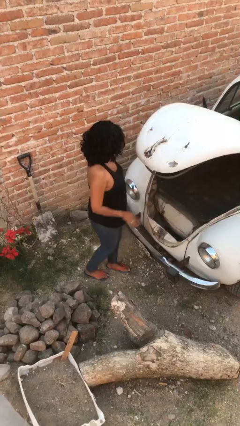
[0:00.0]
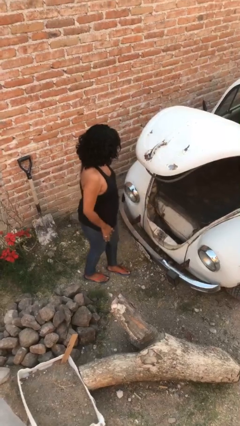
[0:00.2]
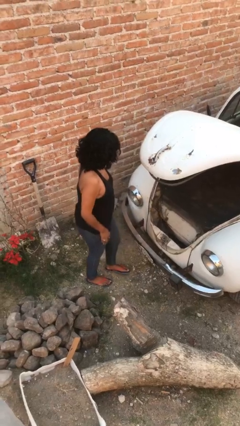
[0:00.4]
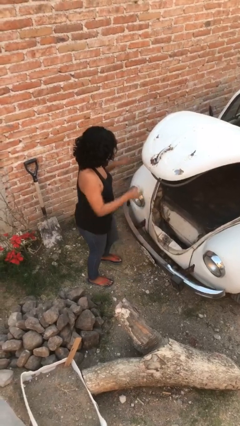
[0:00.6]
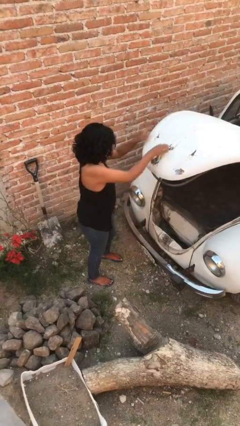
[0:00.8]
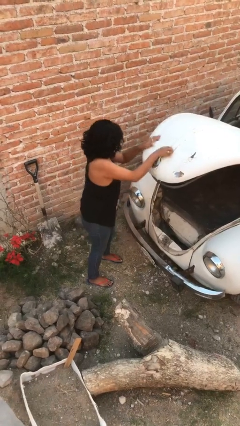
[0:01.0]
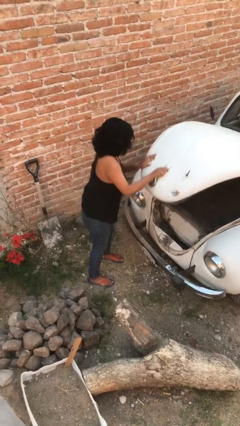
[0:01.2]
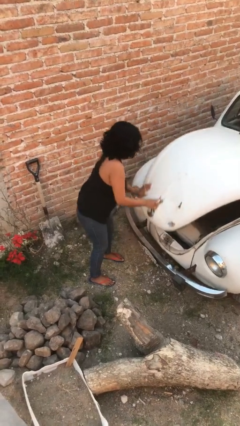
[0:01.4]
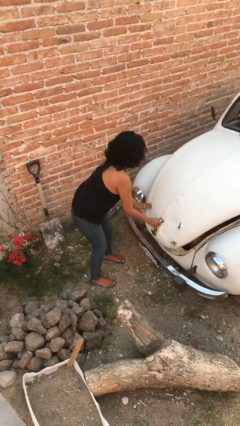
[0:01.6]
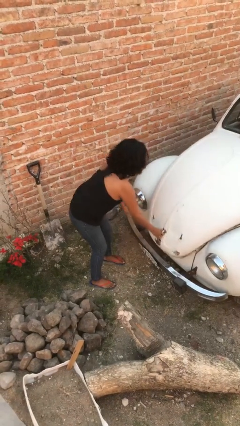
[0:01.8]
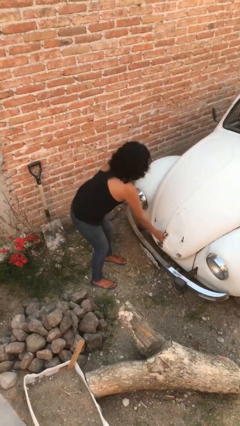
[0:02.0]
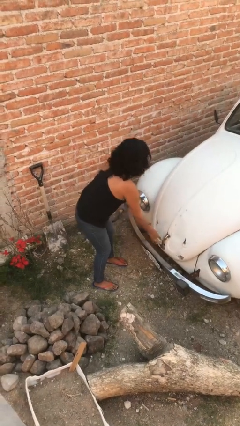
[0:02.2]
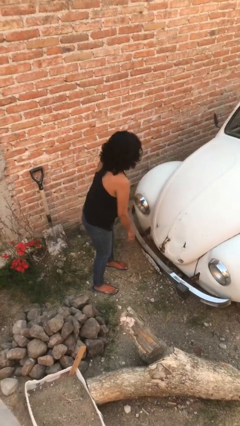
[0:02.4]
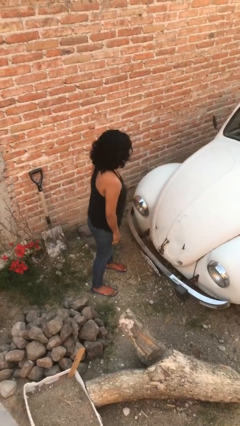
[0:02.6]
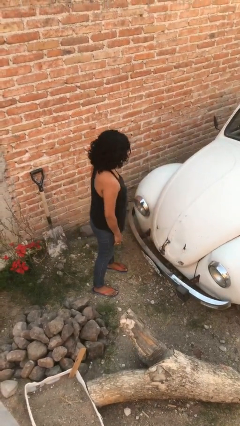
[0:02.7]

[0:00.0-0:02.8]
person closes car trunk

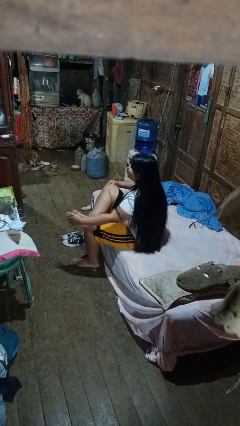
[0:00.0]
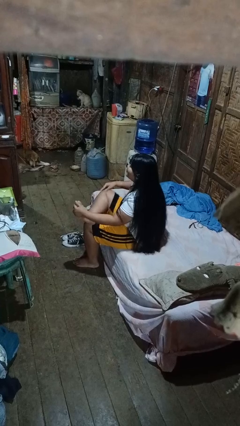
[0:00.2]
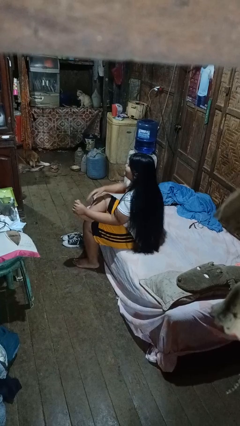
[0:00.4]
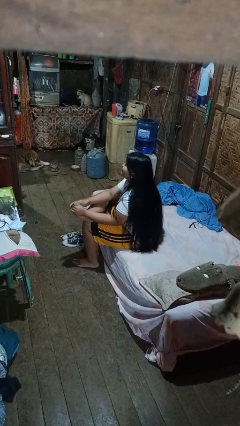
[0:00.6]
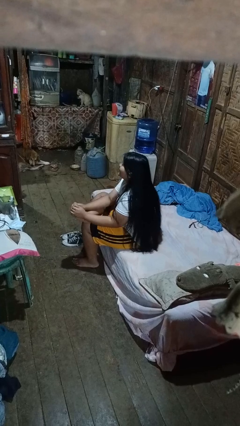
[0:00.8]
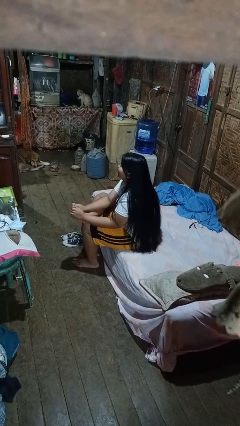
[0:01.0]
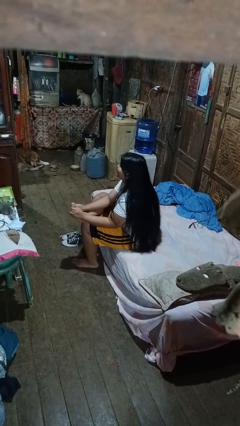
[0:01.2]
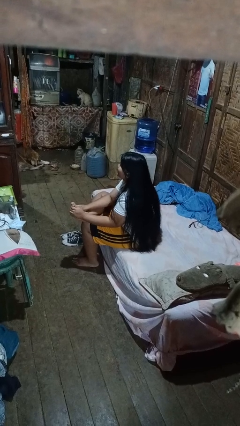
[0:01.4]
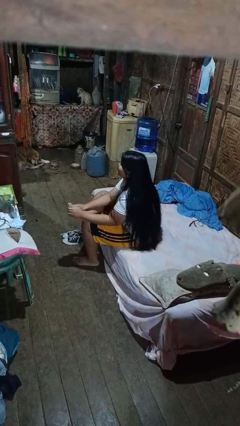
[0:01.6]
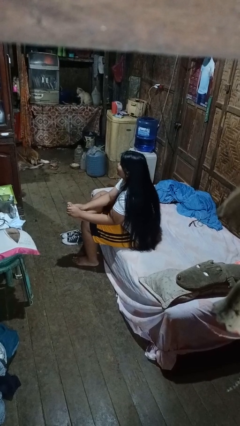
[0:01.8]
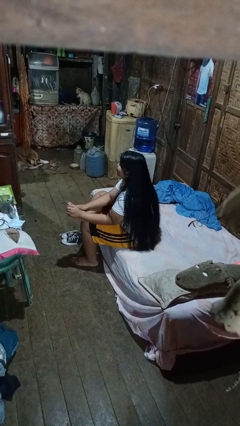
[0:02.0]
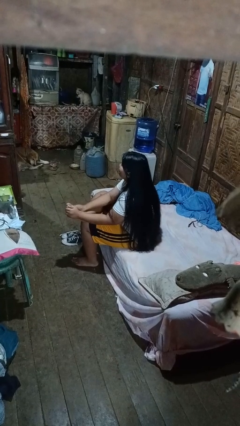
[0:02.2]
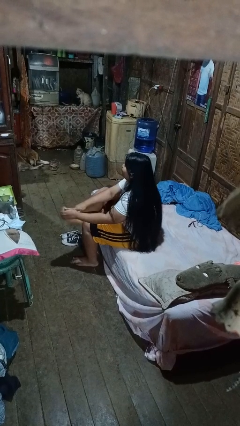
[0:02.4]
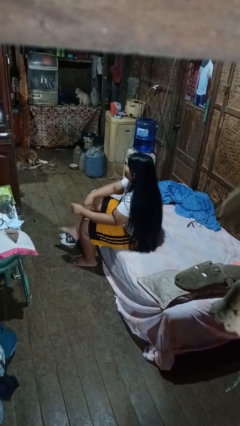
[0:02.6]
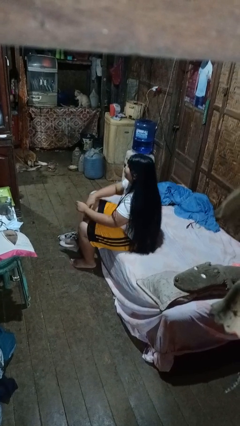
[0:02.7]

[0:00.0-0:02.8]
person rubs foot

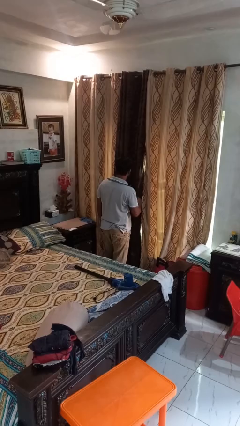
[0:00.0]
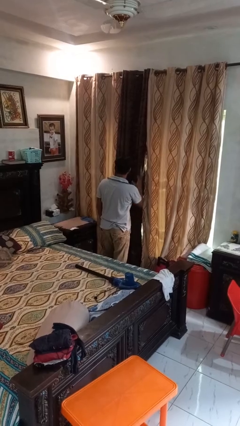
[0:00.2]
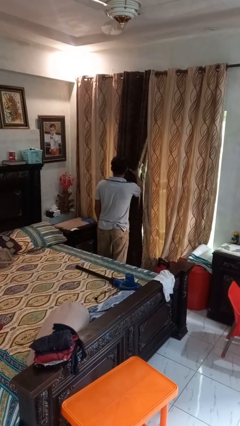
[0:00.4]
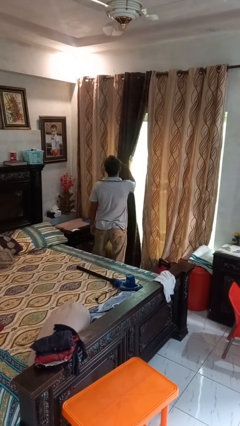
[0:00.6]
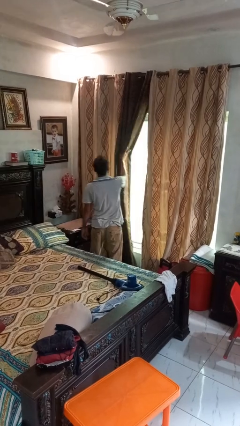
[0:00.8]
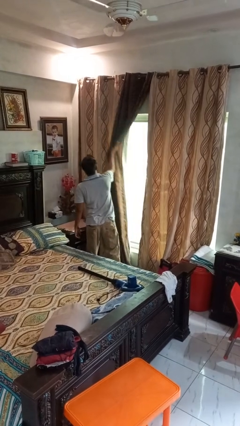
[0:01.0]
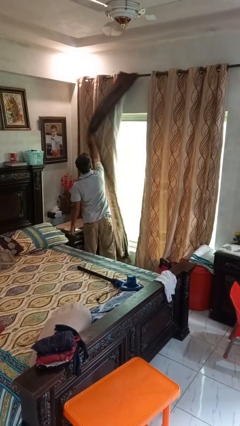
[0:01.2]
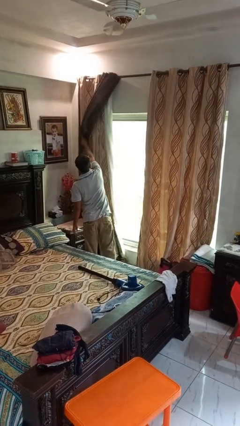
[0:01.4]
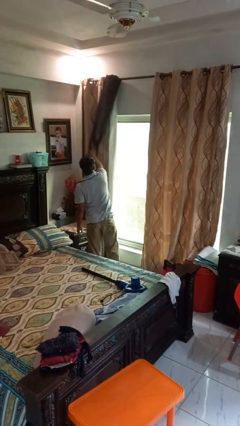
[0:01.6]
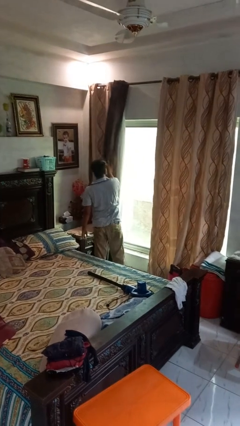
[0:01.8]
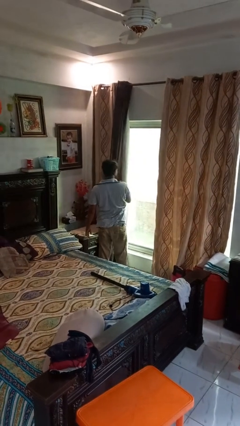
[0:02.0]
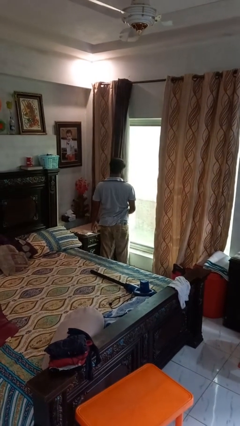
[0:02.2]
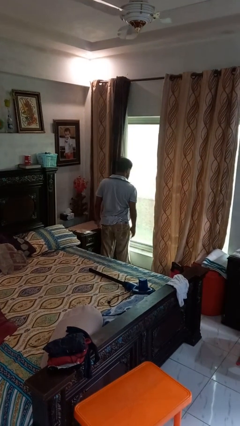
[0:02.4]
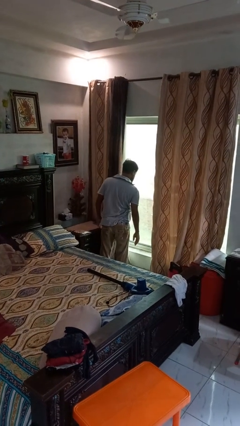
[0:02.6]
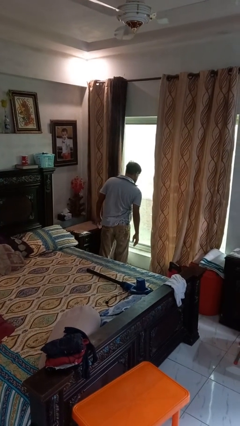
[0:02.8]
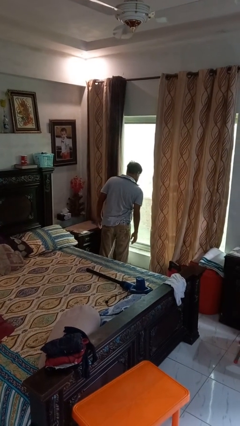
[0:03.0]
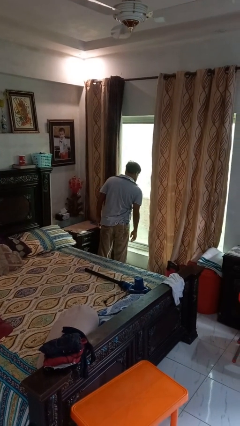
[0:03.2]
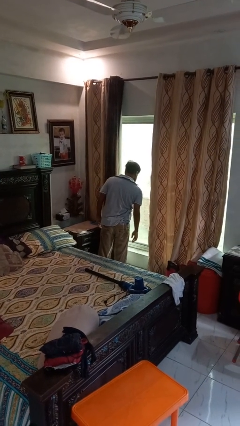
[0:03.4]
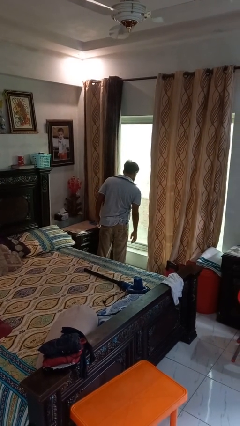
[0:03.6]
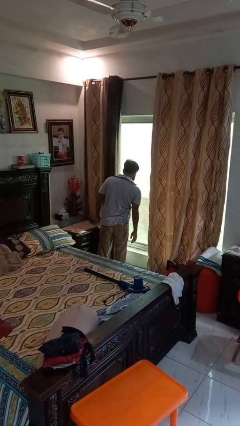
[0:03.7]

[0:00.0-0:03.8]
person opens curtains

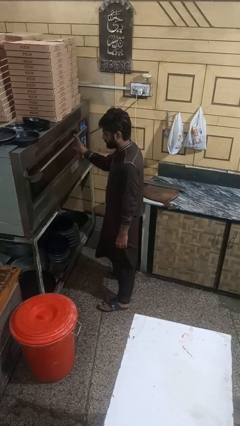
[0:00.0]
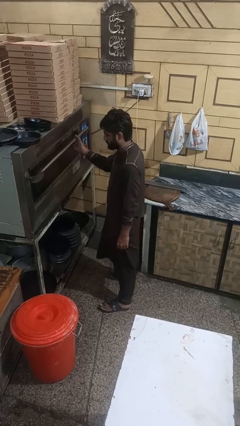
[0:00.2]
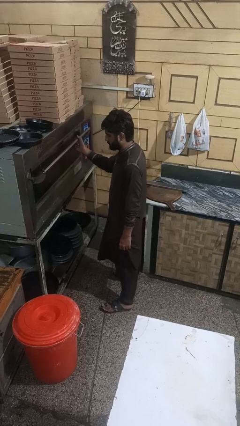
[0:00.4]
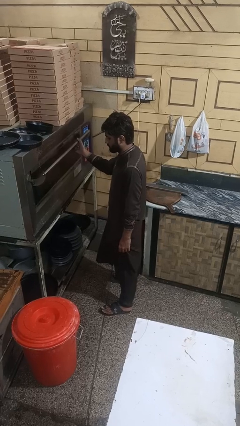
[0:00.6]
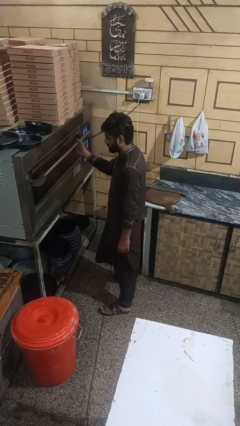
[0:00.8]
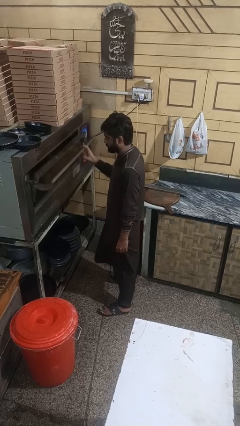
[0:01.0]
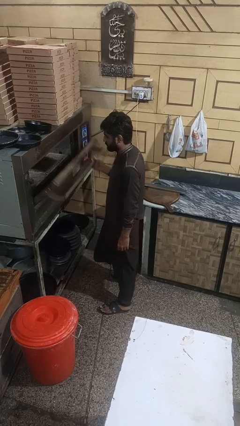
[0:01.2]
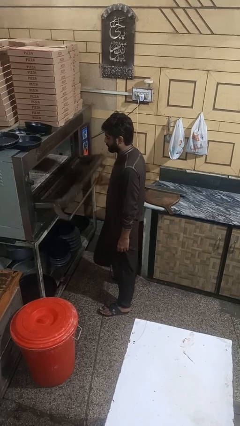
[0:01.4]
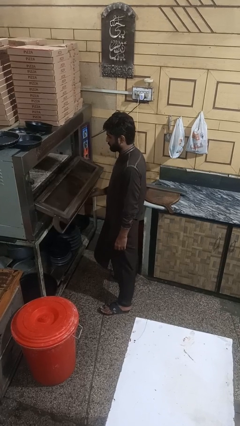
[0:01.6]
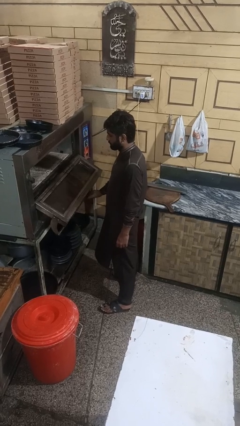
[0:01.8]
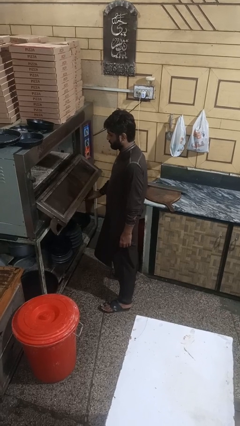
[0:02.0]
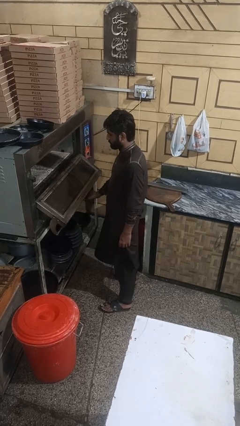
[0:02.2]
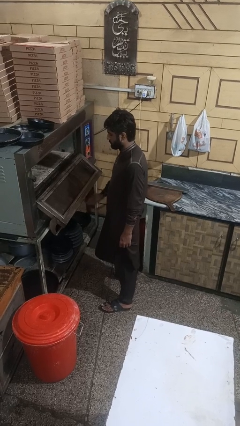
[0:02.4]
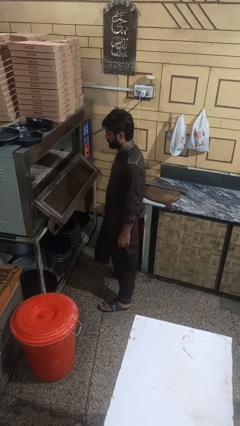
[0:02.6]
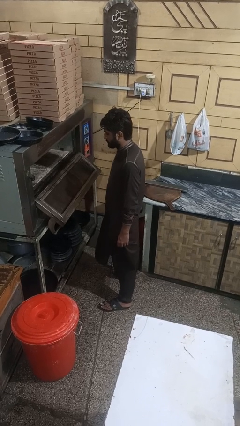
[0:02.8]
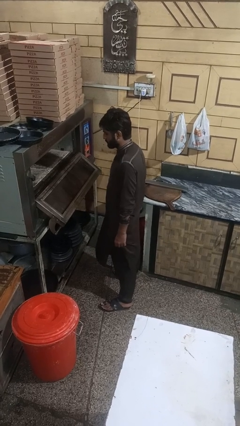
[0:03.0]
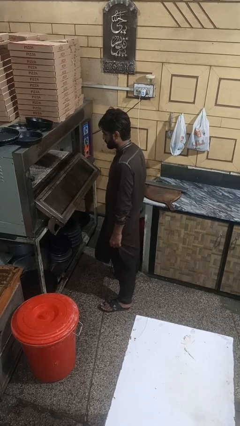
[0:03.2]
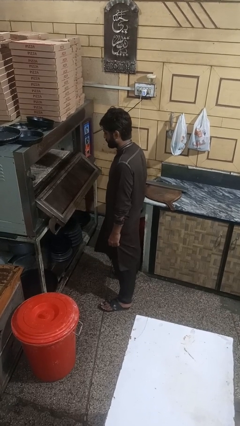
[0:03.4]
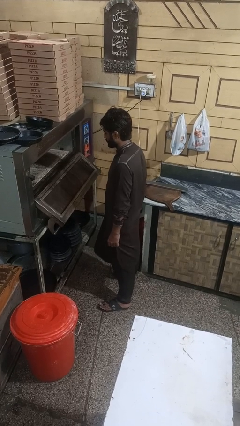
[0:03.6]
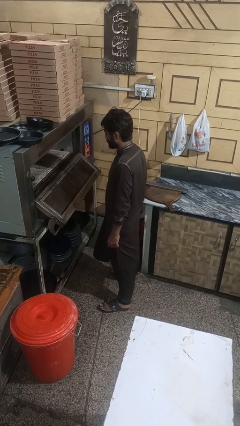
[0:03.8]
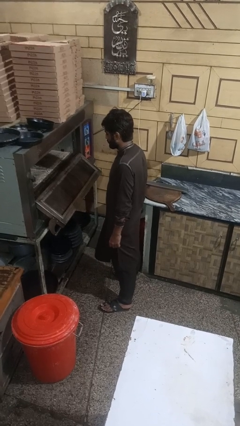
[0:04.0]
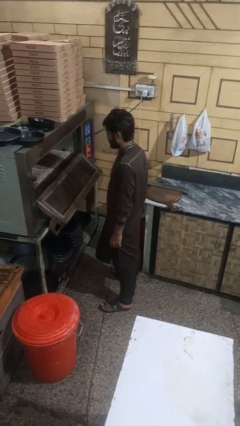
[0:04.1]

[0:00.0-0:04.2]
person opens microwave

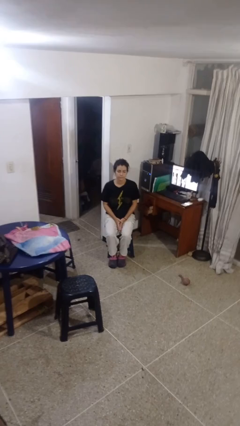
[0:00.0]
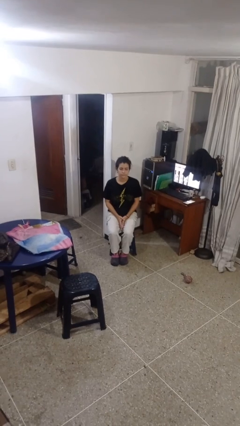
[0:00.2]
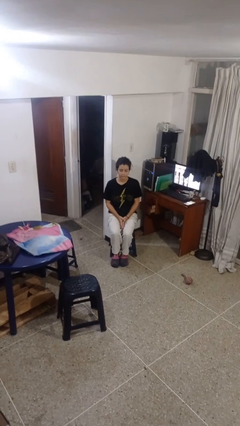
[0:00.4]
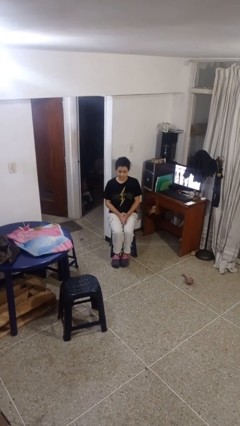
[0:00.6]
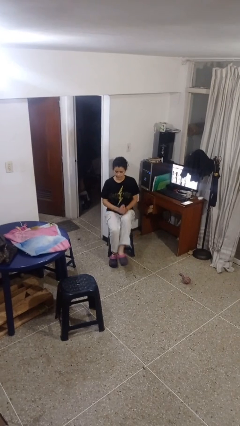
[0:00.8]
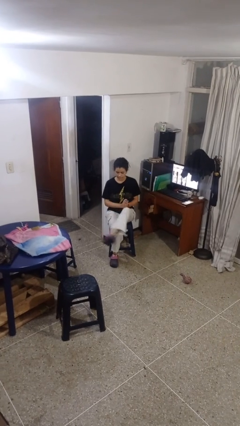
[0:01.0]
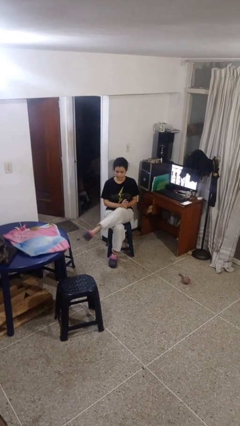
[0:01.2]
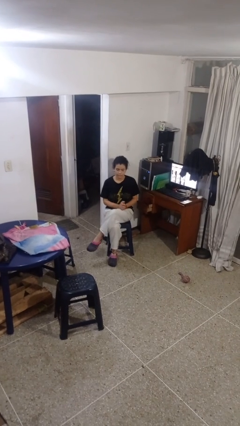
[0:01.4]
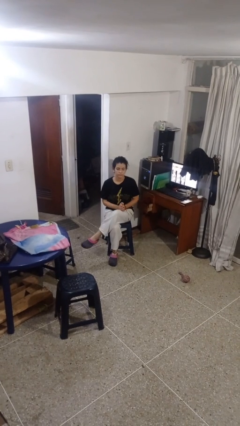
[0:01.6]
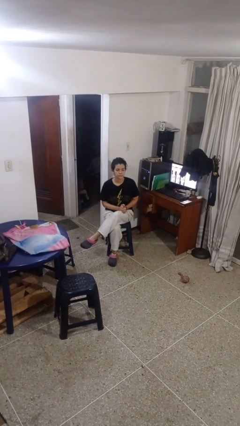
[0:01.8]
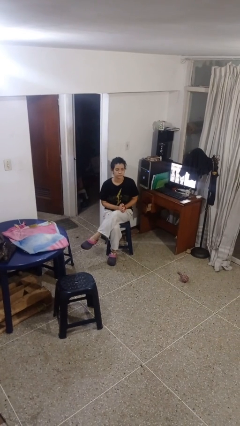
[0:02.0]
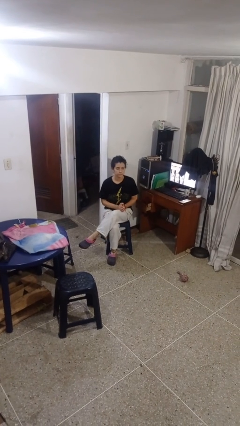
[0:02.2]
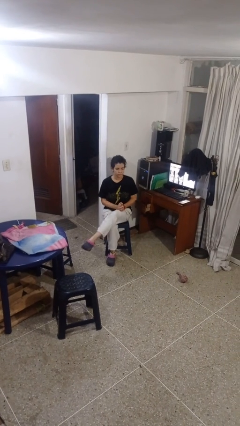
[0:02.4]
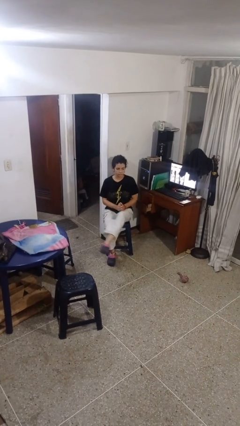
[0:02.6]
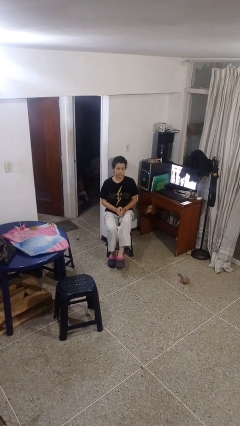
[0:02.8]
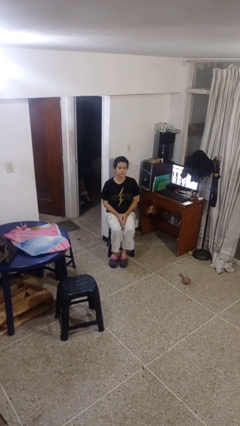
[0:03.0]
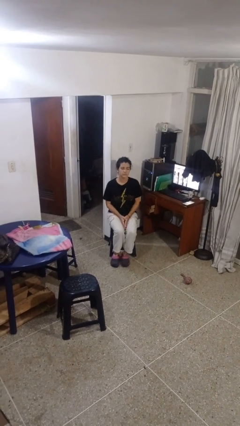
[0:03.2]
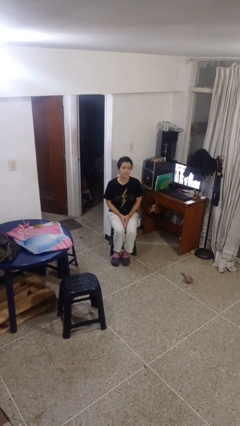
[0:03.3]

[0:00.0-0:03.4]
person crosses legs

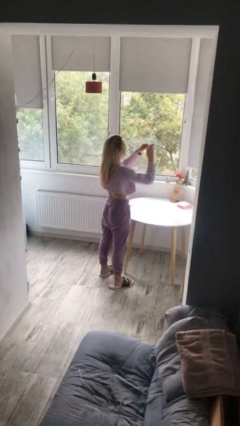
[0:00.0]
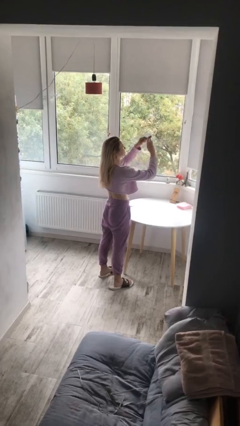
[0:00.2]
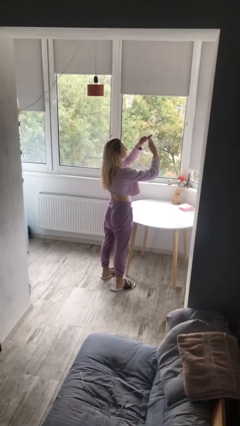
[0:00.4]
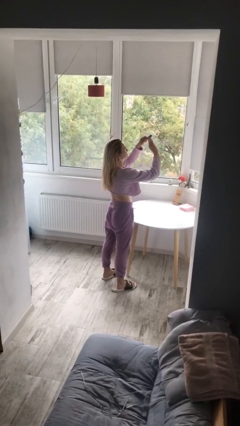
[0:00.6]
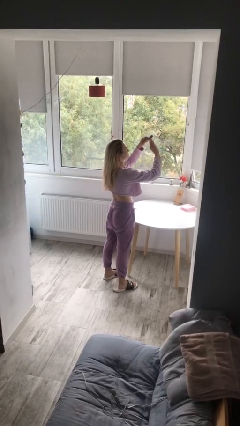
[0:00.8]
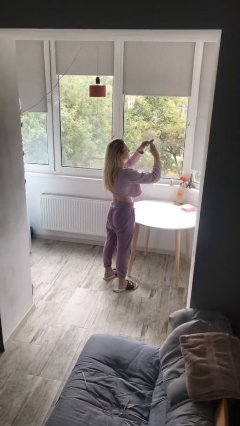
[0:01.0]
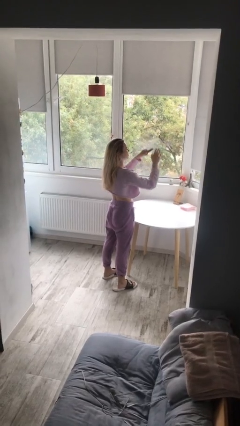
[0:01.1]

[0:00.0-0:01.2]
person files fingernails
